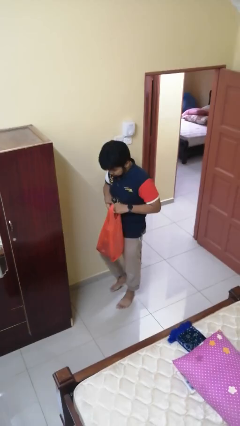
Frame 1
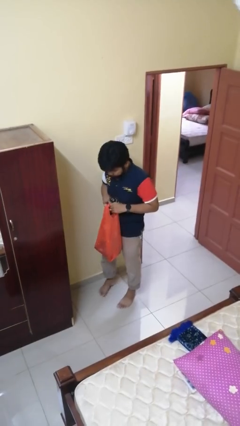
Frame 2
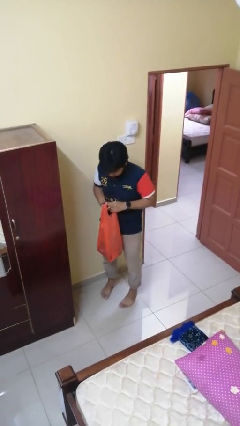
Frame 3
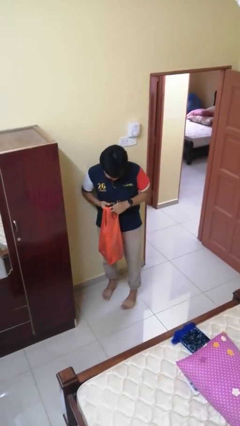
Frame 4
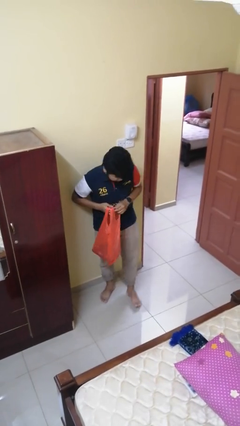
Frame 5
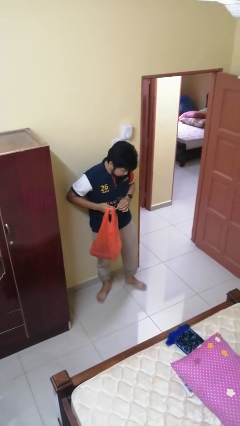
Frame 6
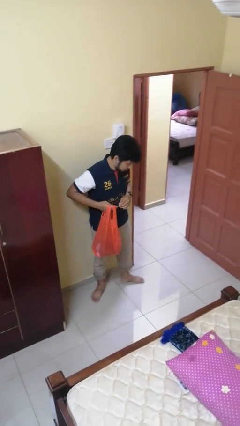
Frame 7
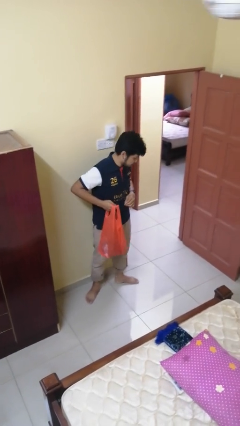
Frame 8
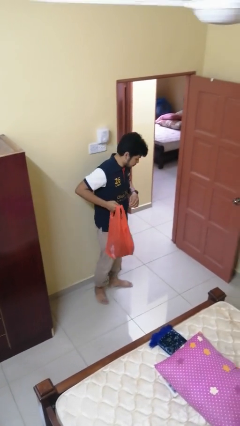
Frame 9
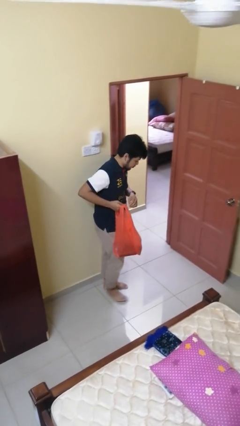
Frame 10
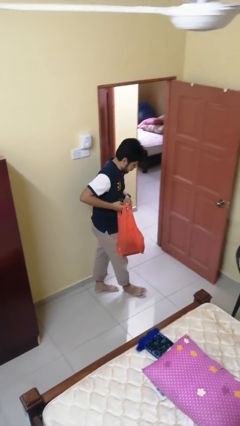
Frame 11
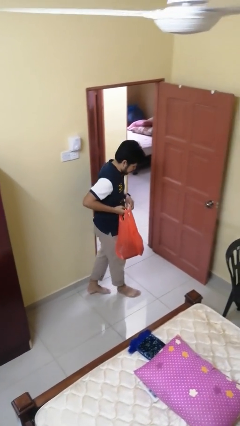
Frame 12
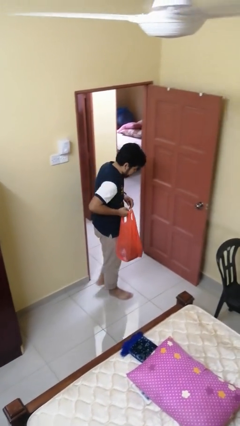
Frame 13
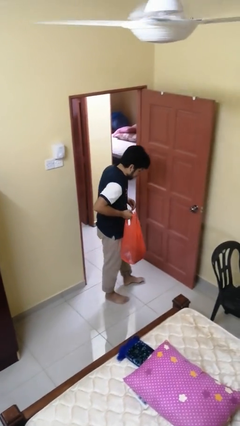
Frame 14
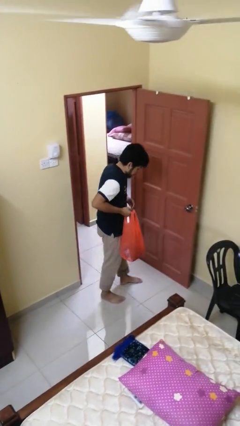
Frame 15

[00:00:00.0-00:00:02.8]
person carries groceries

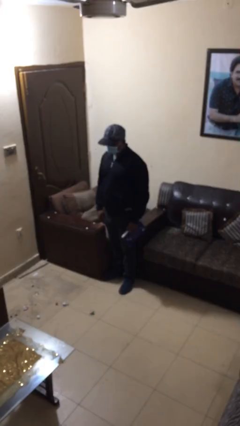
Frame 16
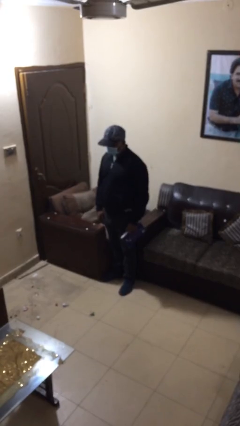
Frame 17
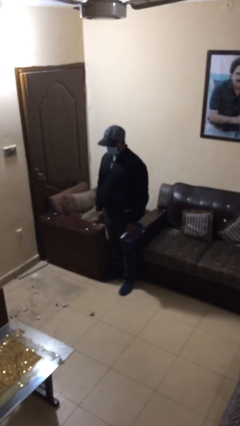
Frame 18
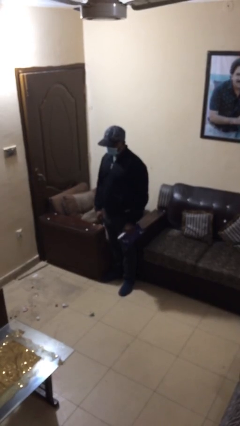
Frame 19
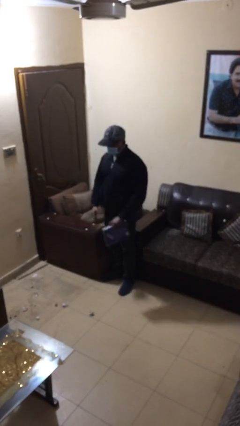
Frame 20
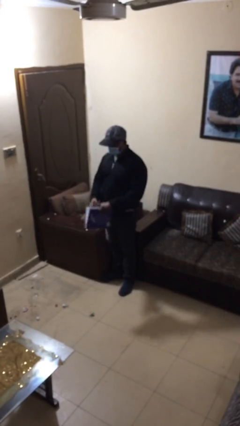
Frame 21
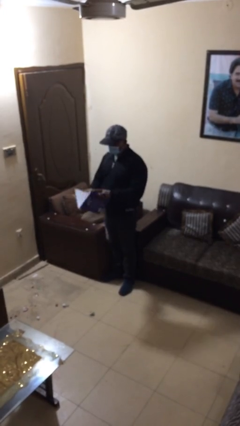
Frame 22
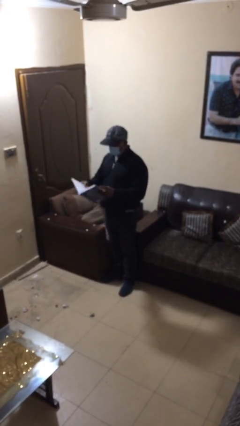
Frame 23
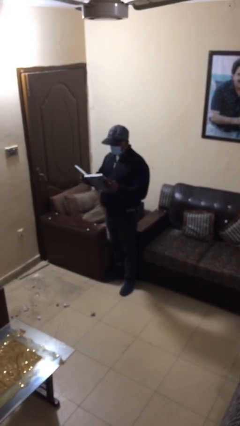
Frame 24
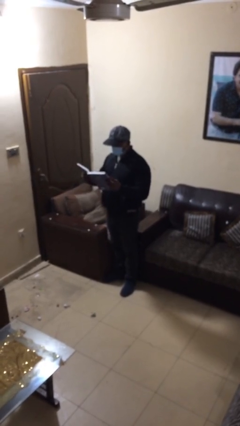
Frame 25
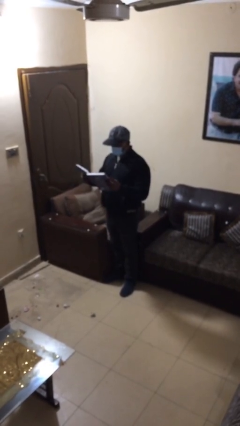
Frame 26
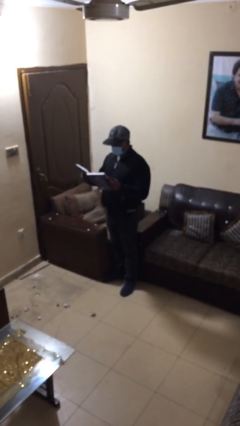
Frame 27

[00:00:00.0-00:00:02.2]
person reads document

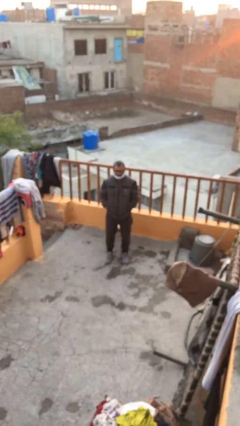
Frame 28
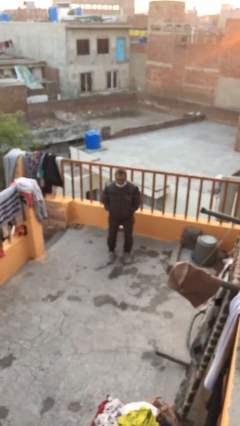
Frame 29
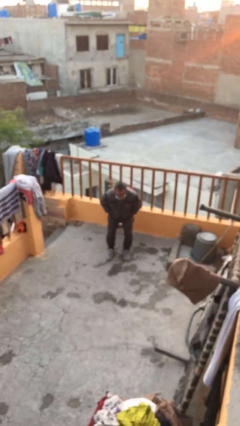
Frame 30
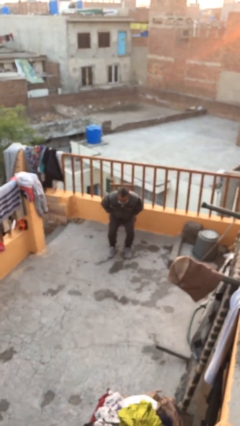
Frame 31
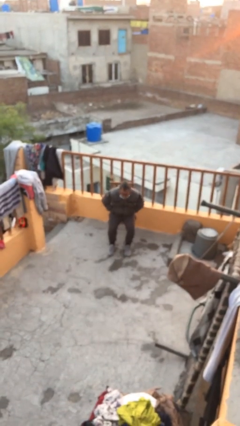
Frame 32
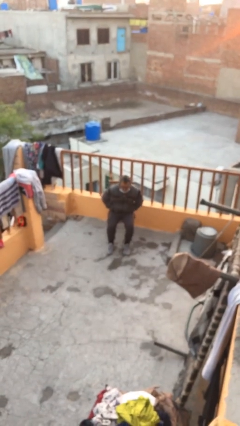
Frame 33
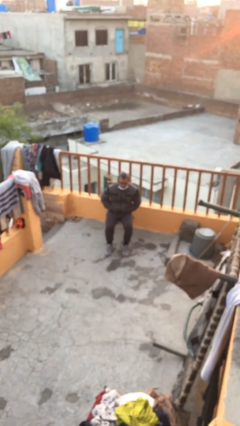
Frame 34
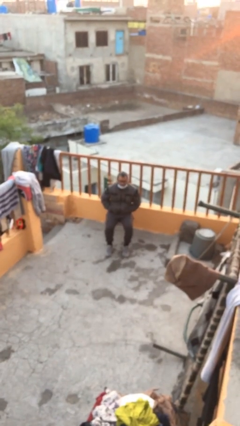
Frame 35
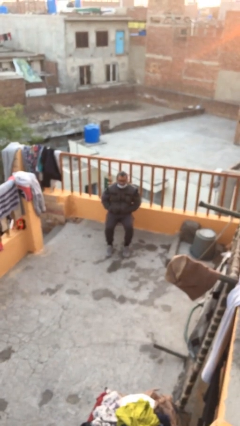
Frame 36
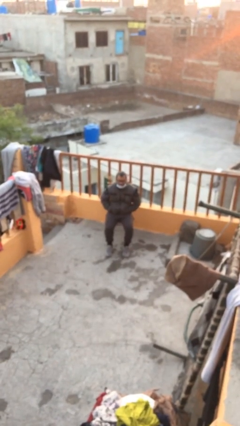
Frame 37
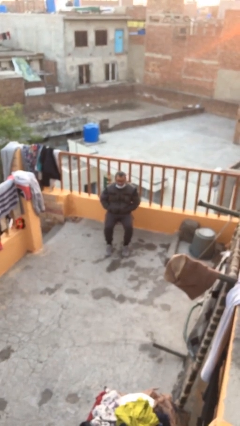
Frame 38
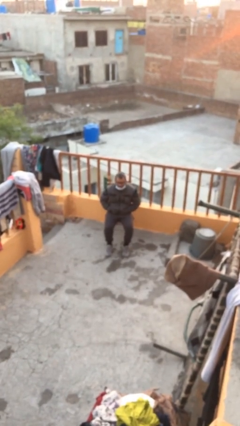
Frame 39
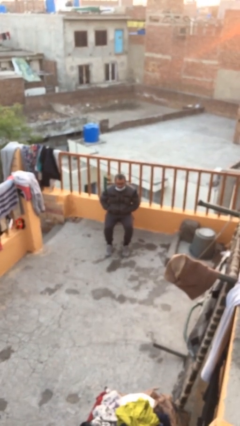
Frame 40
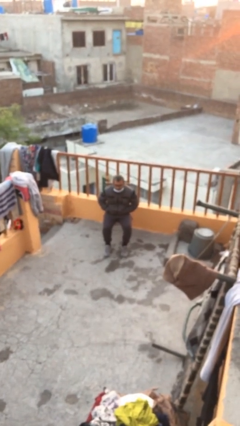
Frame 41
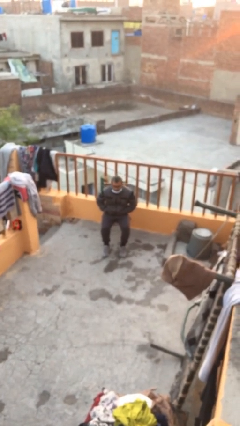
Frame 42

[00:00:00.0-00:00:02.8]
person sits down

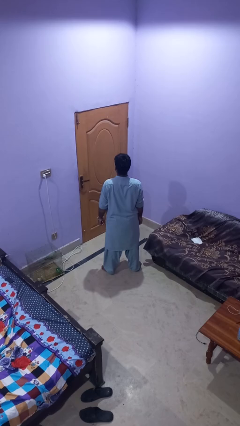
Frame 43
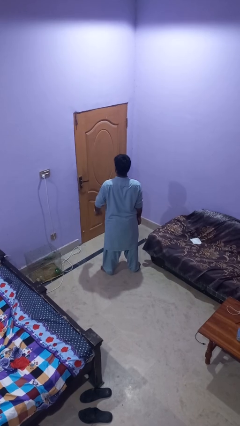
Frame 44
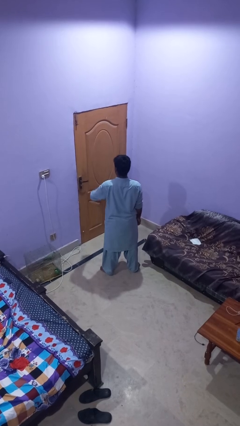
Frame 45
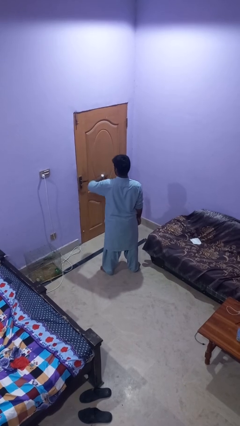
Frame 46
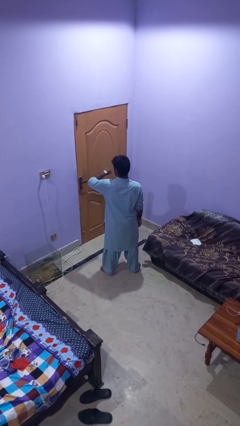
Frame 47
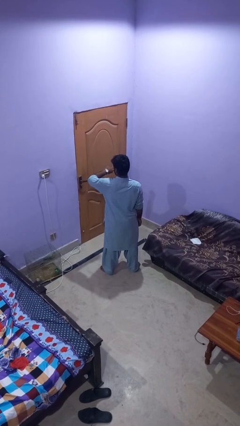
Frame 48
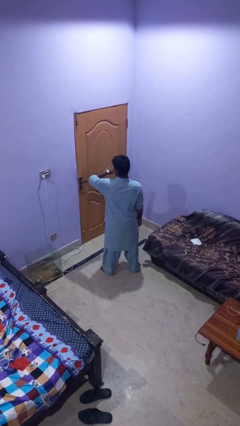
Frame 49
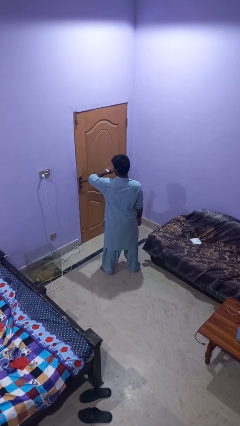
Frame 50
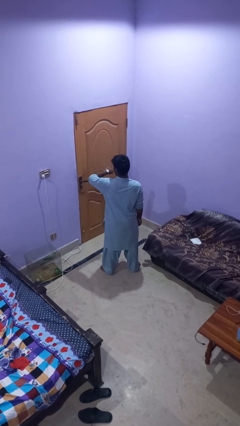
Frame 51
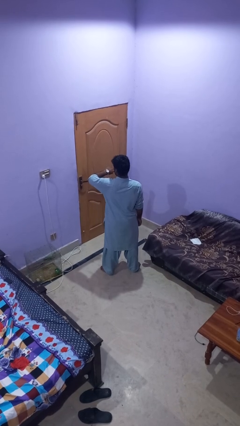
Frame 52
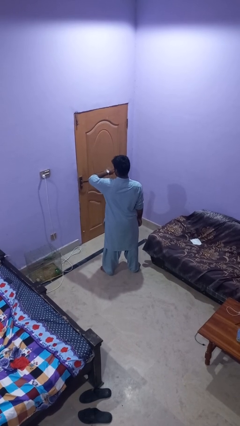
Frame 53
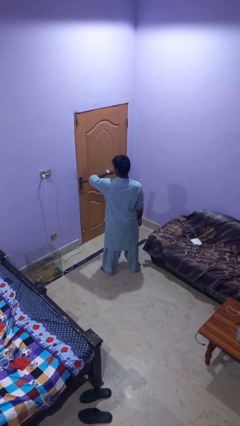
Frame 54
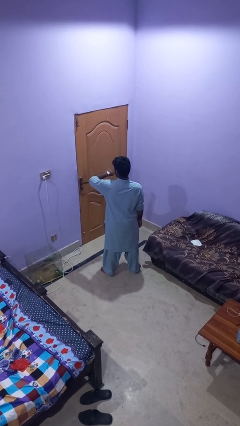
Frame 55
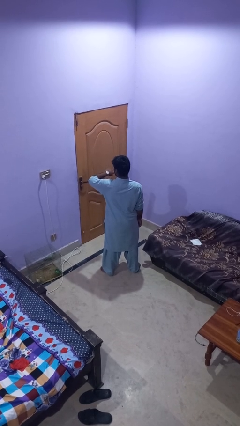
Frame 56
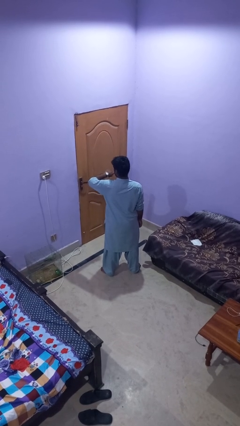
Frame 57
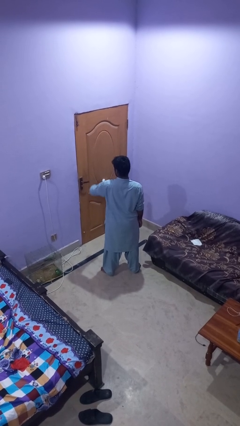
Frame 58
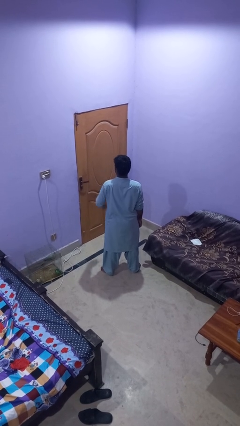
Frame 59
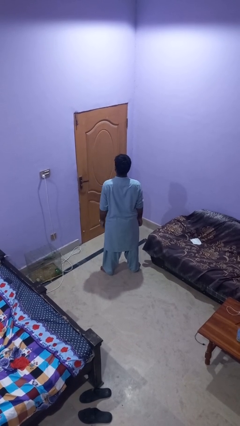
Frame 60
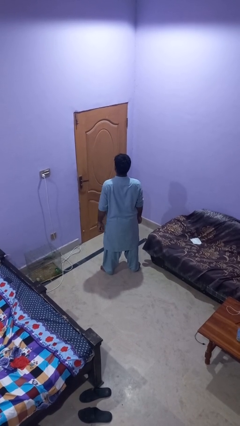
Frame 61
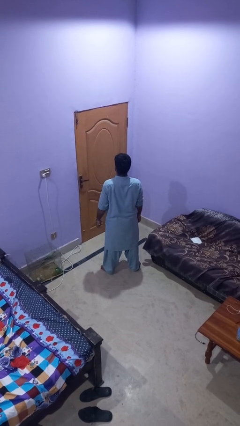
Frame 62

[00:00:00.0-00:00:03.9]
person looks at wristwatch

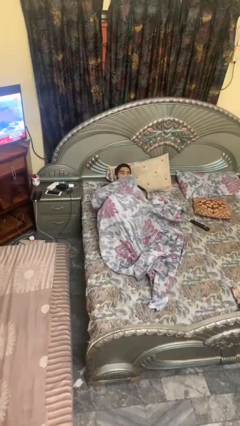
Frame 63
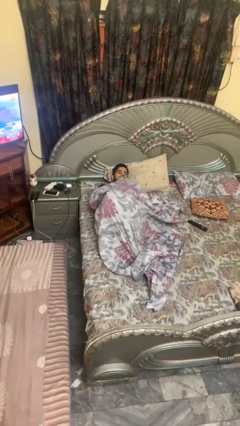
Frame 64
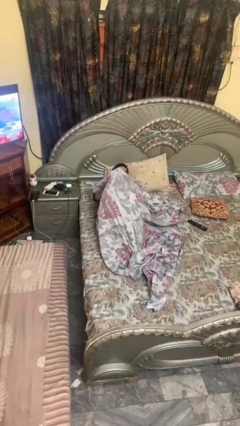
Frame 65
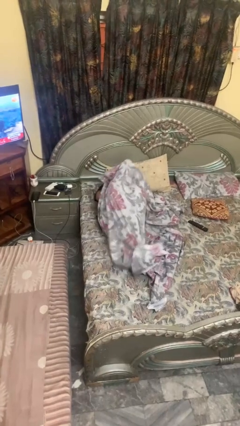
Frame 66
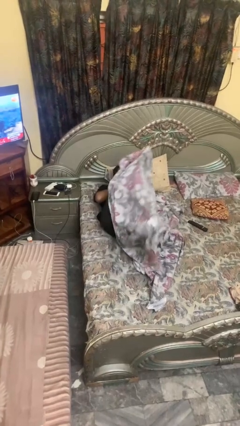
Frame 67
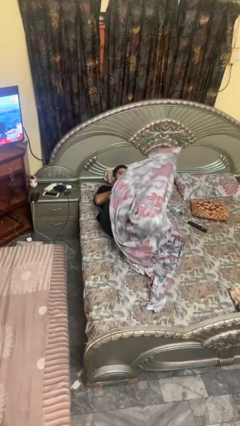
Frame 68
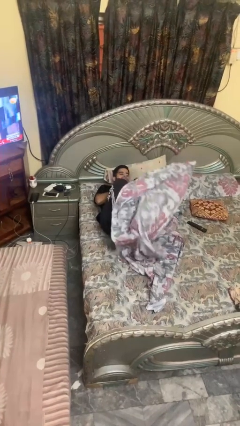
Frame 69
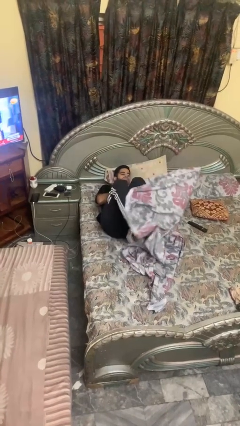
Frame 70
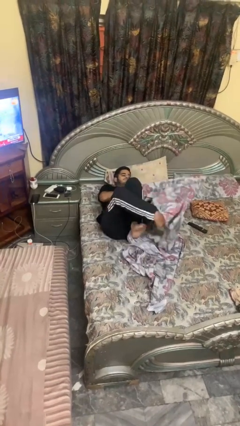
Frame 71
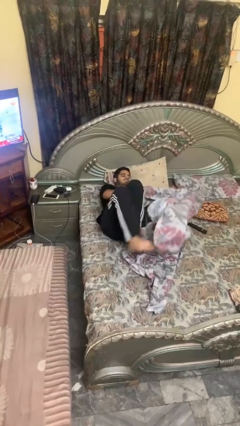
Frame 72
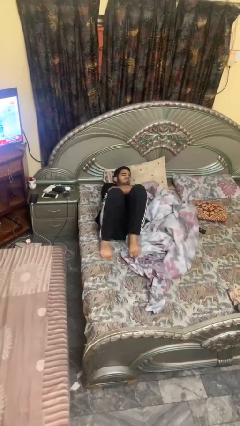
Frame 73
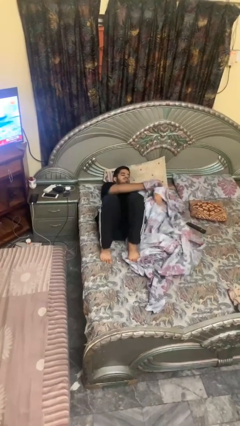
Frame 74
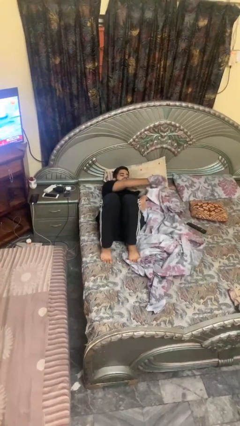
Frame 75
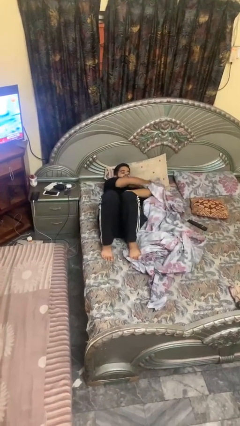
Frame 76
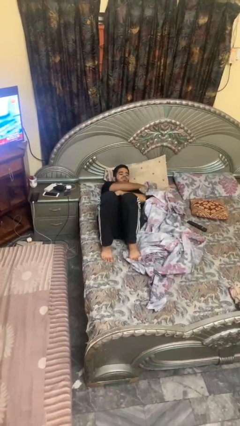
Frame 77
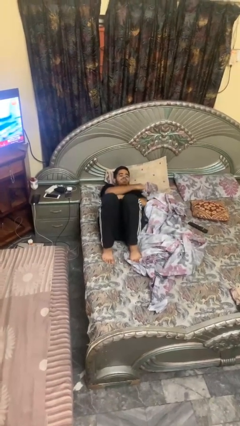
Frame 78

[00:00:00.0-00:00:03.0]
person uncovers with bedsheets

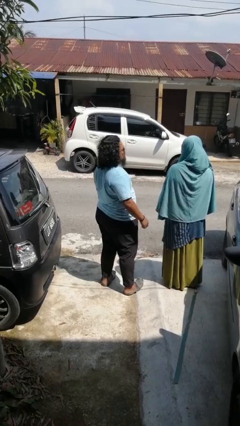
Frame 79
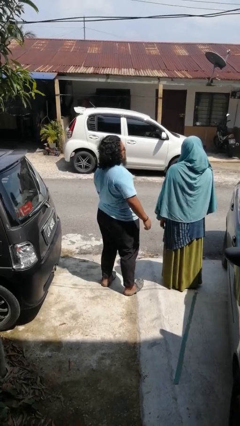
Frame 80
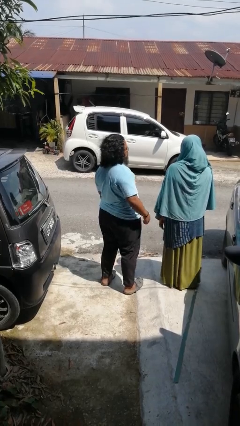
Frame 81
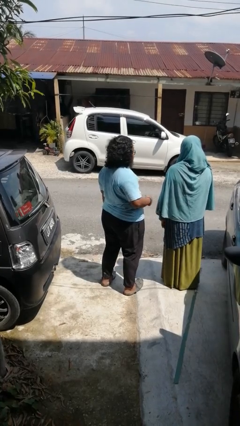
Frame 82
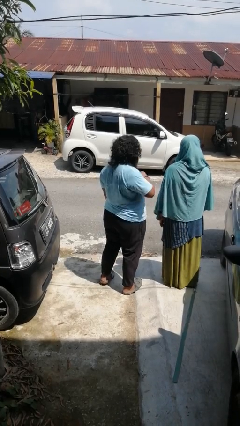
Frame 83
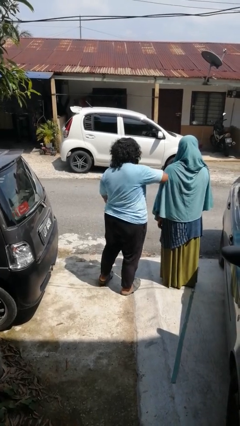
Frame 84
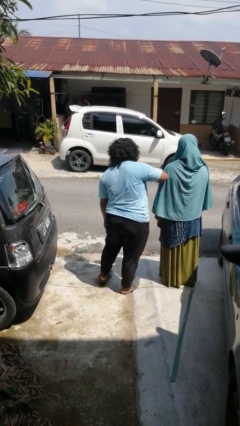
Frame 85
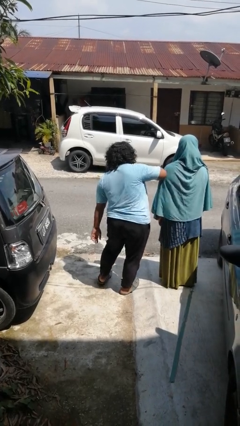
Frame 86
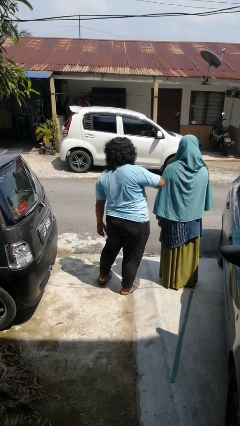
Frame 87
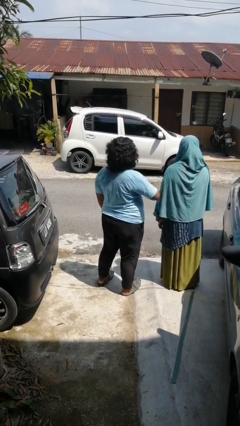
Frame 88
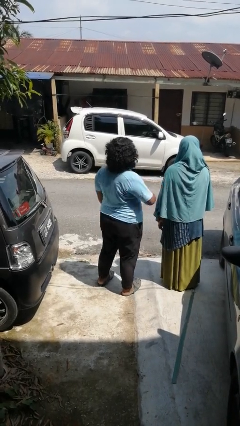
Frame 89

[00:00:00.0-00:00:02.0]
person nudges person with elbow

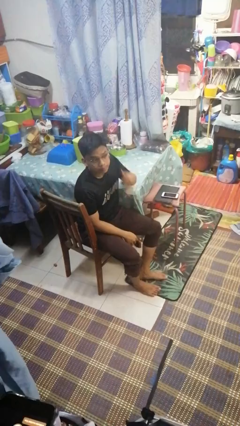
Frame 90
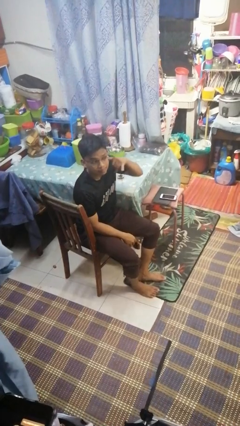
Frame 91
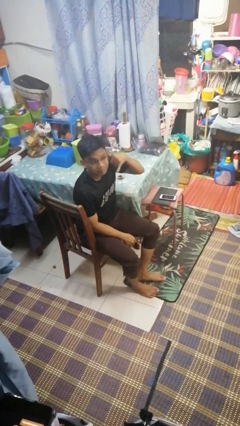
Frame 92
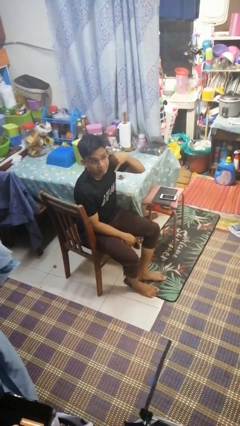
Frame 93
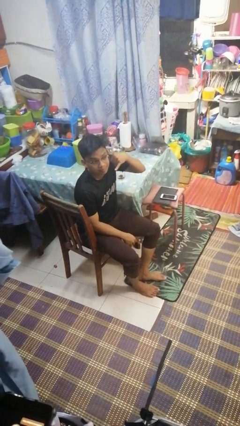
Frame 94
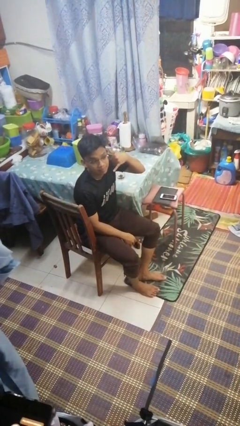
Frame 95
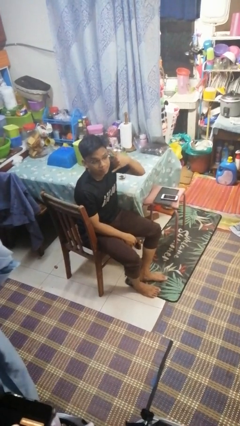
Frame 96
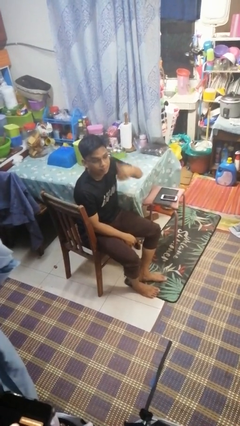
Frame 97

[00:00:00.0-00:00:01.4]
person gestures call me
